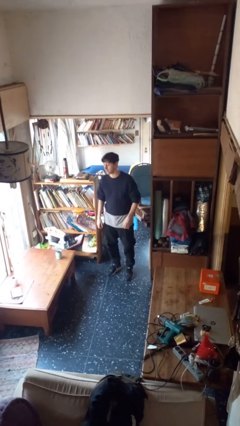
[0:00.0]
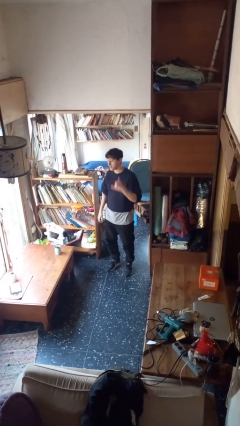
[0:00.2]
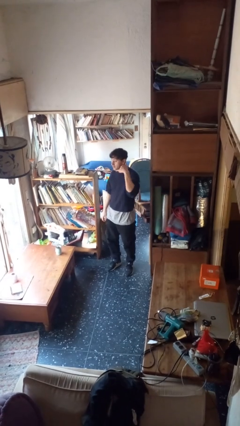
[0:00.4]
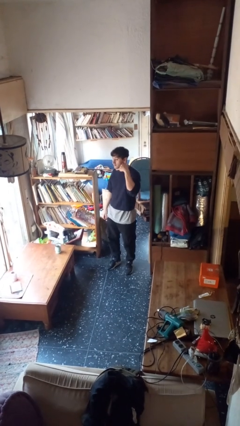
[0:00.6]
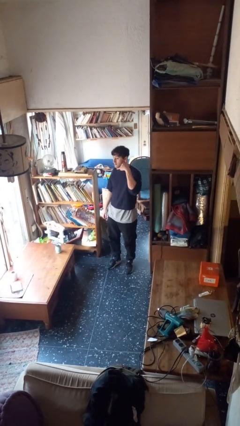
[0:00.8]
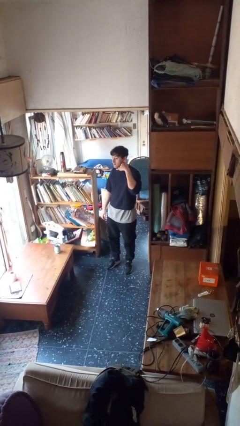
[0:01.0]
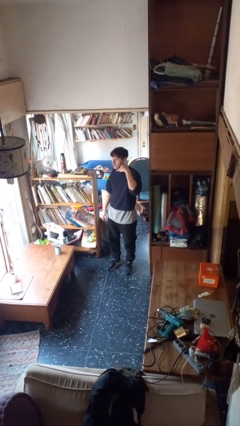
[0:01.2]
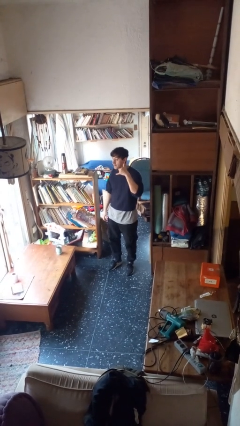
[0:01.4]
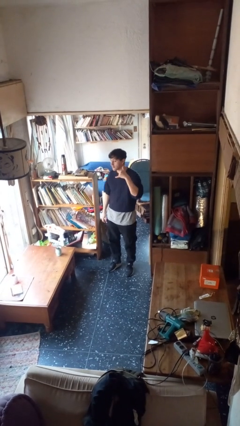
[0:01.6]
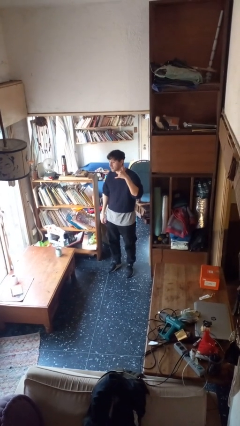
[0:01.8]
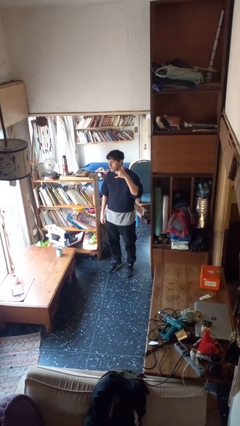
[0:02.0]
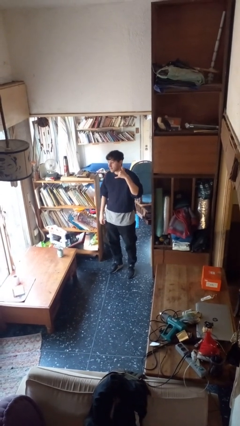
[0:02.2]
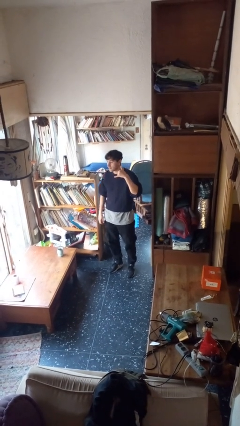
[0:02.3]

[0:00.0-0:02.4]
person gestures call me

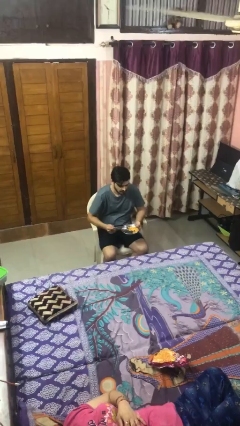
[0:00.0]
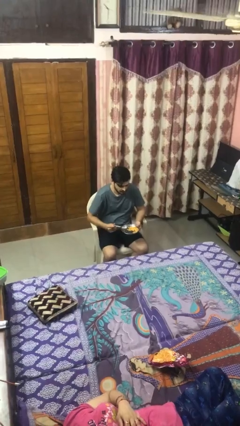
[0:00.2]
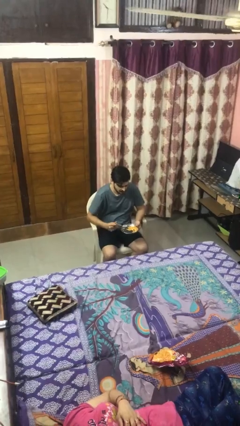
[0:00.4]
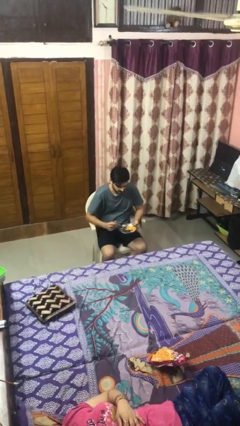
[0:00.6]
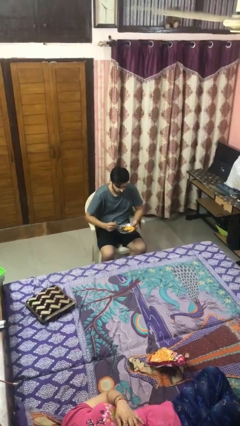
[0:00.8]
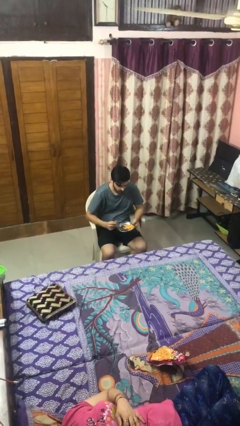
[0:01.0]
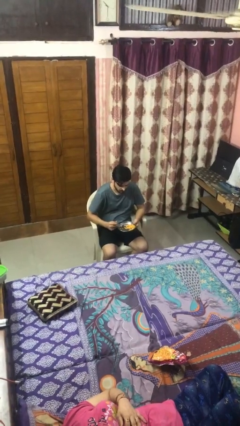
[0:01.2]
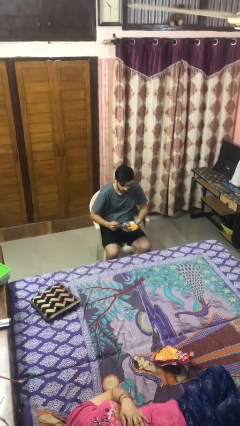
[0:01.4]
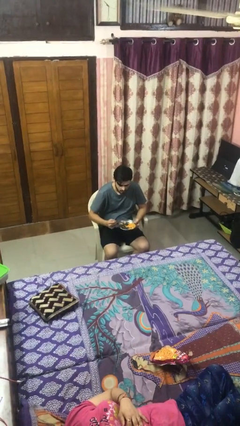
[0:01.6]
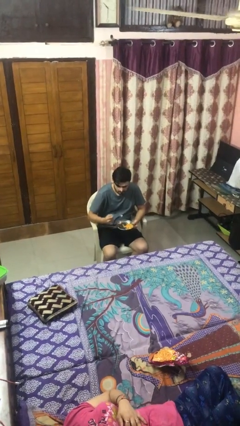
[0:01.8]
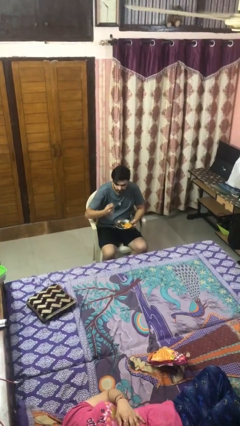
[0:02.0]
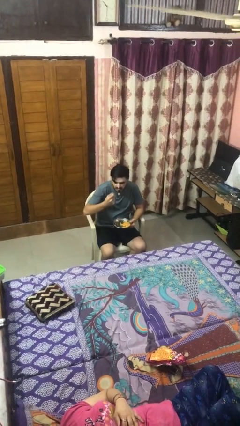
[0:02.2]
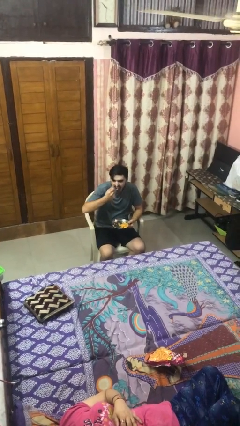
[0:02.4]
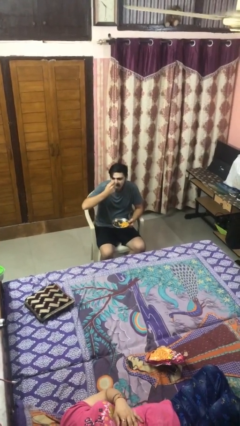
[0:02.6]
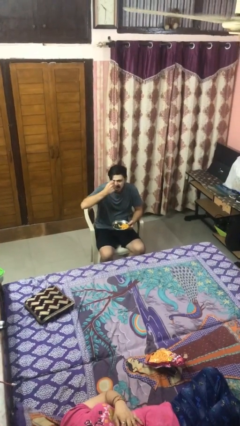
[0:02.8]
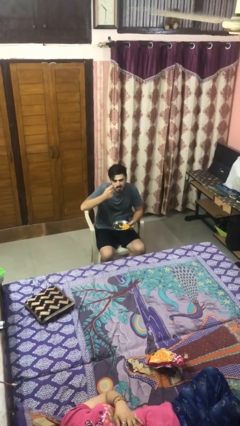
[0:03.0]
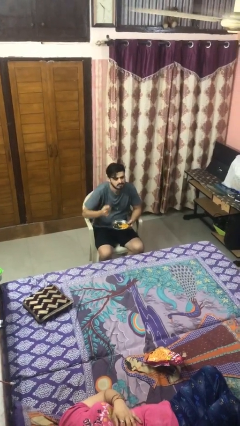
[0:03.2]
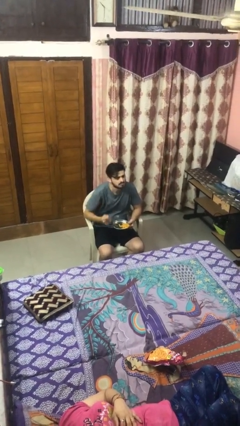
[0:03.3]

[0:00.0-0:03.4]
person eats with utensil

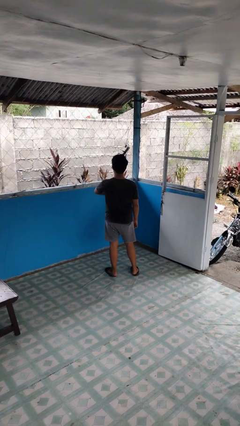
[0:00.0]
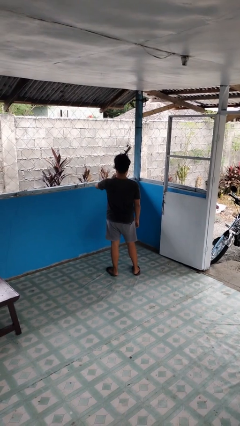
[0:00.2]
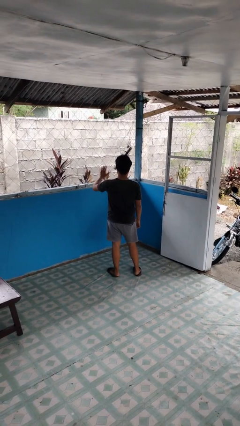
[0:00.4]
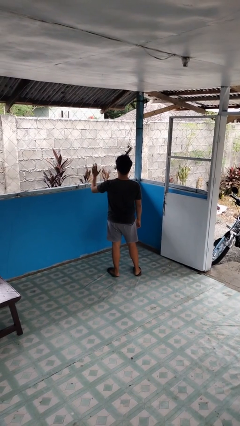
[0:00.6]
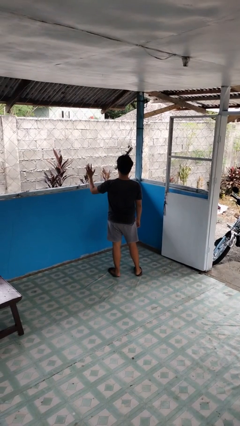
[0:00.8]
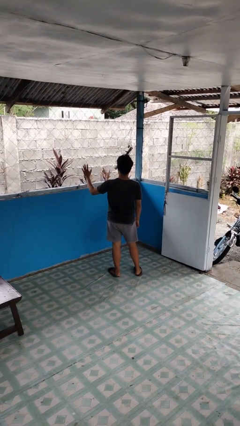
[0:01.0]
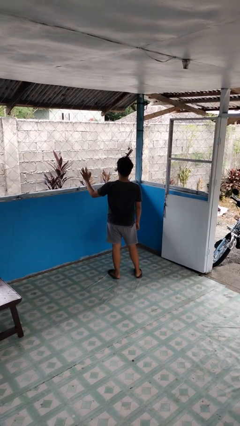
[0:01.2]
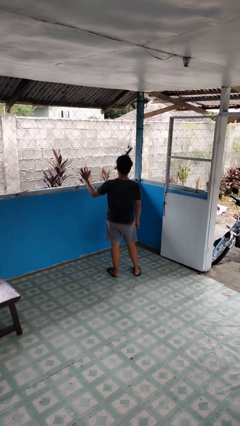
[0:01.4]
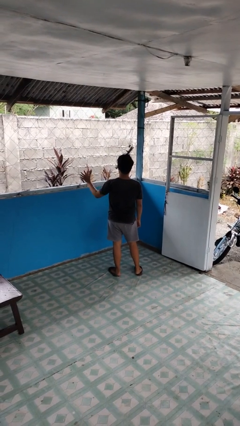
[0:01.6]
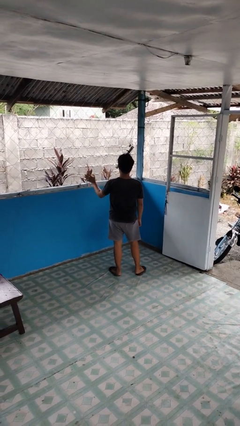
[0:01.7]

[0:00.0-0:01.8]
person gestures swipe left

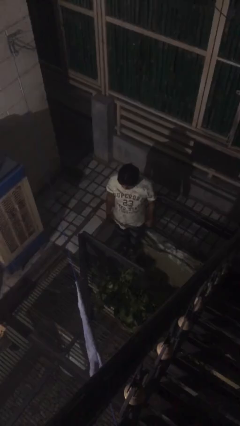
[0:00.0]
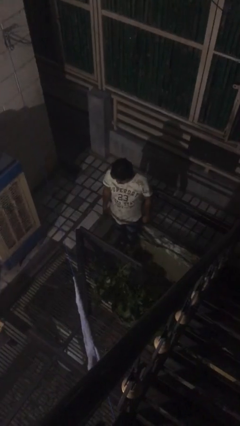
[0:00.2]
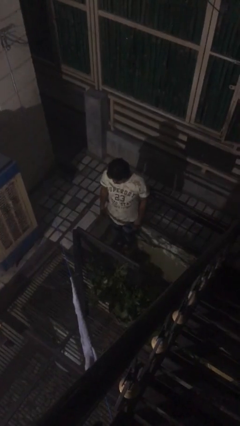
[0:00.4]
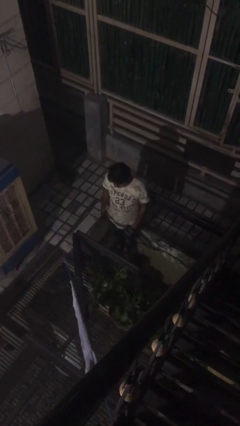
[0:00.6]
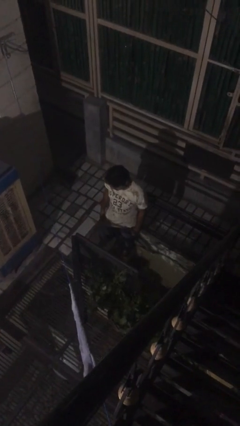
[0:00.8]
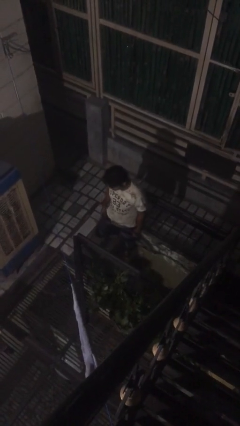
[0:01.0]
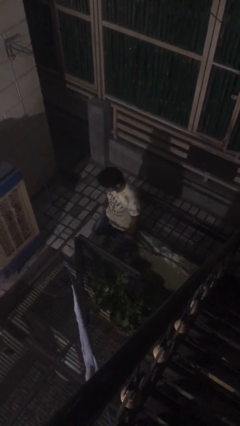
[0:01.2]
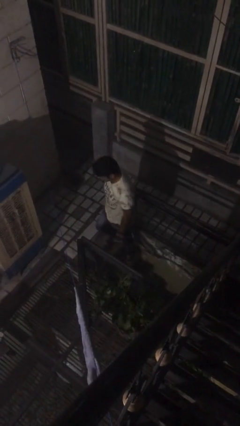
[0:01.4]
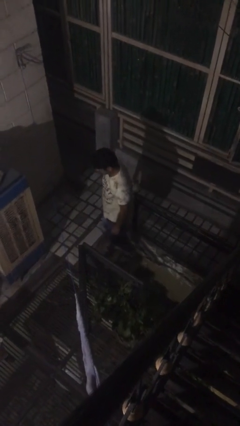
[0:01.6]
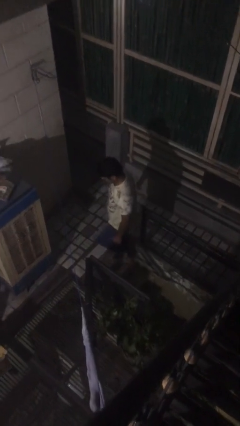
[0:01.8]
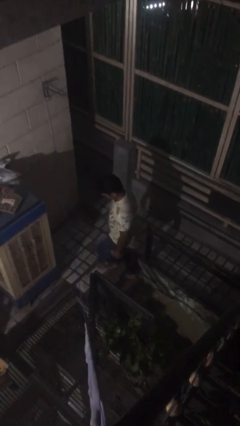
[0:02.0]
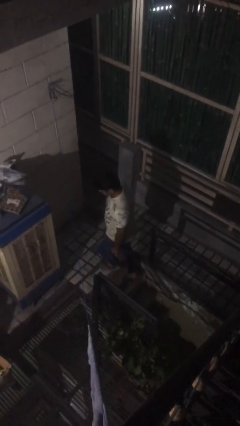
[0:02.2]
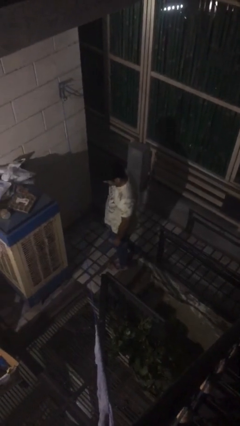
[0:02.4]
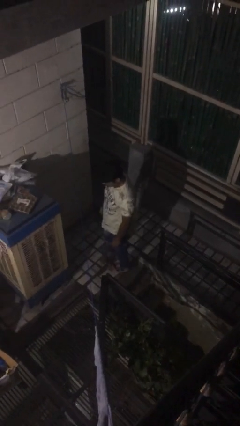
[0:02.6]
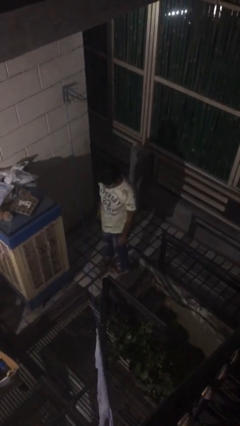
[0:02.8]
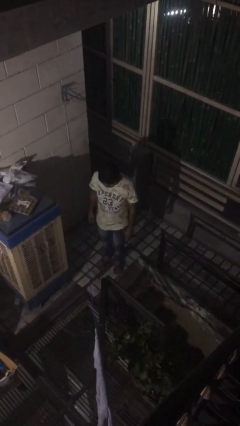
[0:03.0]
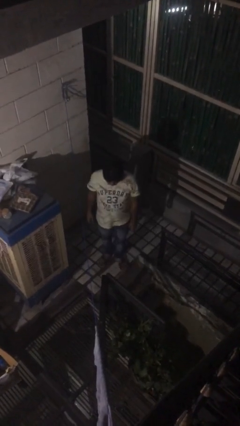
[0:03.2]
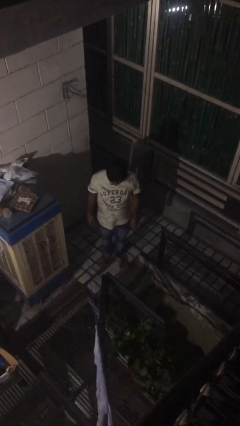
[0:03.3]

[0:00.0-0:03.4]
person climbs up stairs

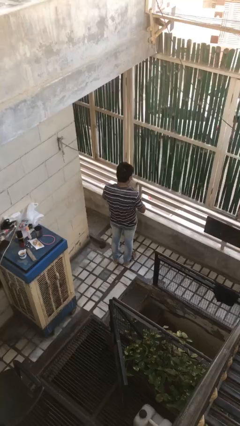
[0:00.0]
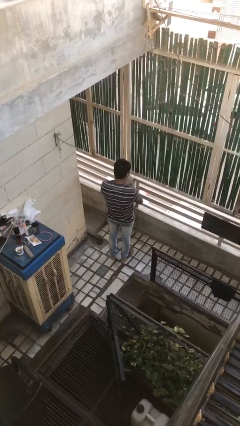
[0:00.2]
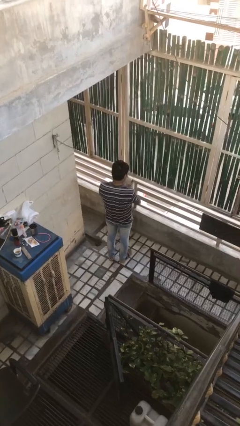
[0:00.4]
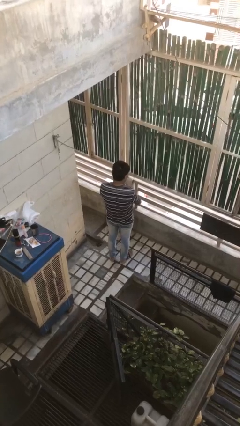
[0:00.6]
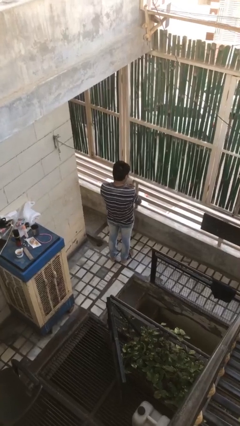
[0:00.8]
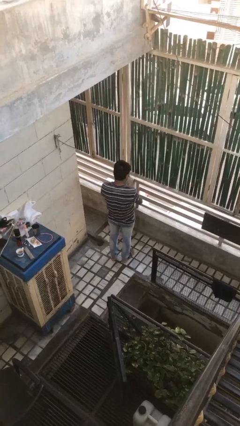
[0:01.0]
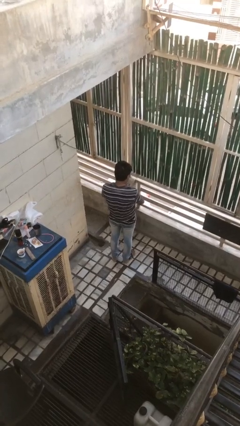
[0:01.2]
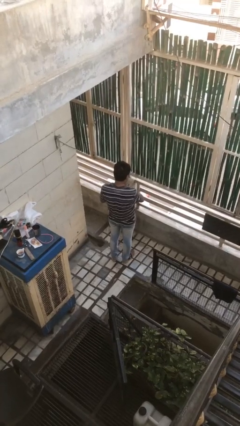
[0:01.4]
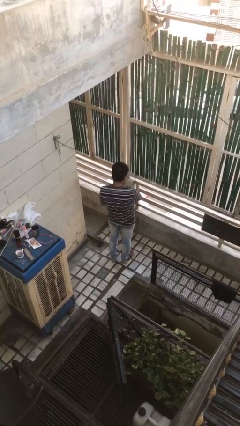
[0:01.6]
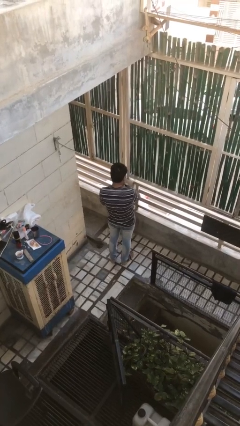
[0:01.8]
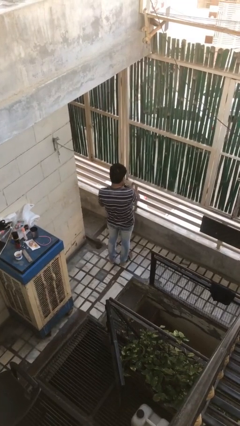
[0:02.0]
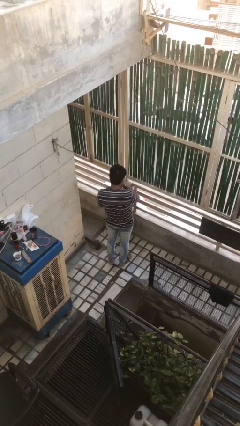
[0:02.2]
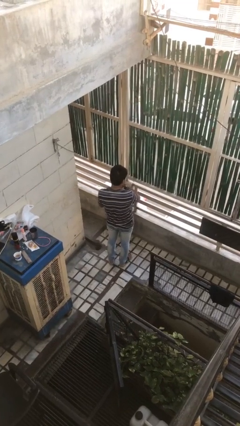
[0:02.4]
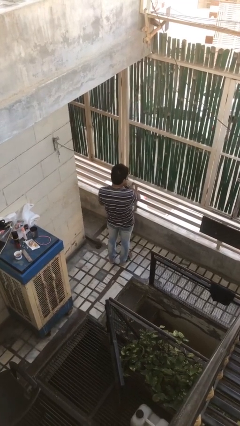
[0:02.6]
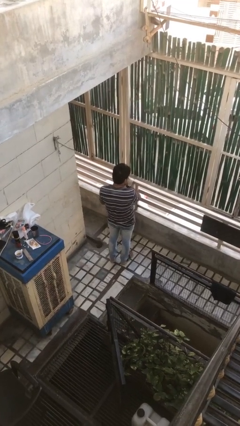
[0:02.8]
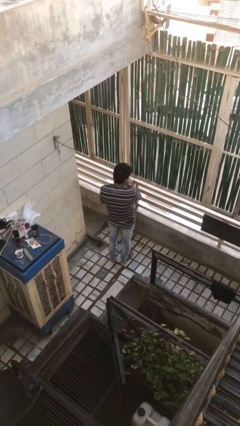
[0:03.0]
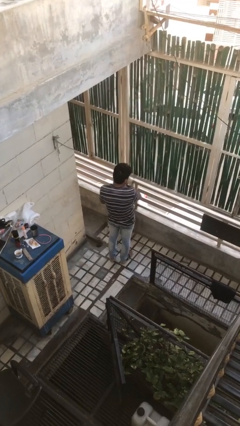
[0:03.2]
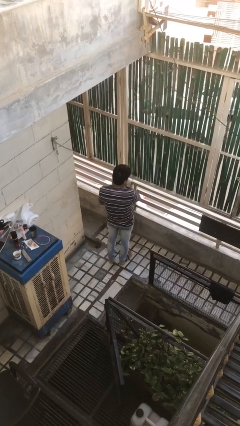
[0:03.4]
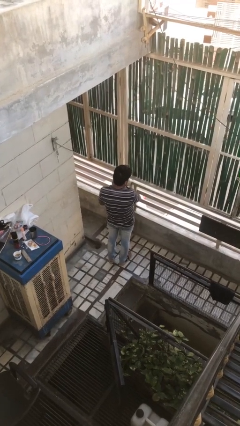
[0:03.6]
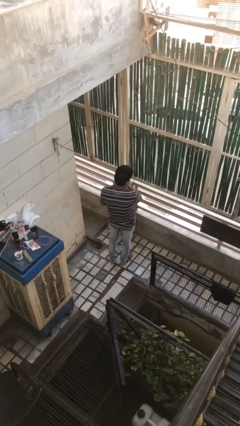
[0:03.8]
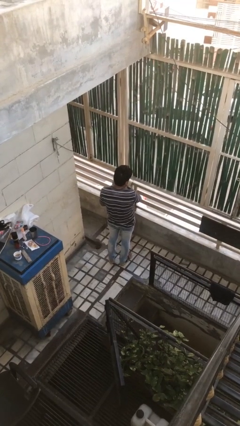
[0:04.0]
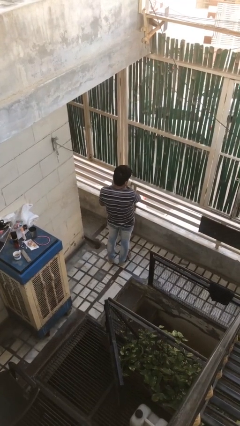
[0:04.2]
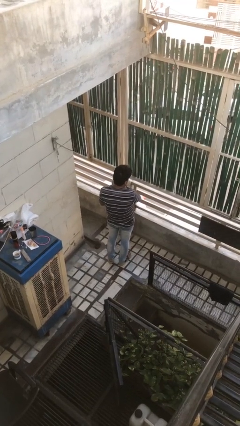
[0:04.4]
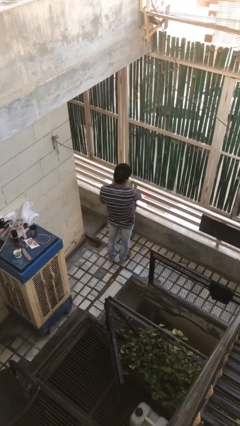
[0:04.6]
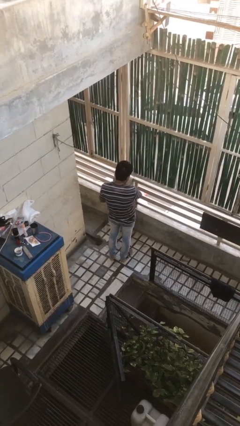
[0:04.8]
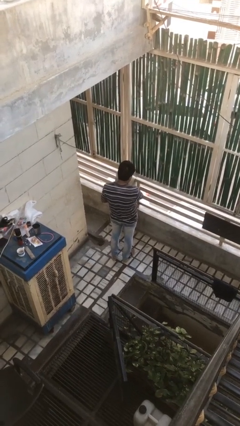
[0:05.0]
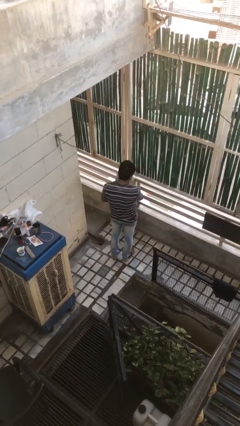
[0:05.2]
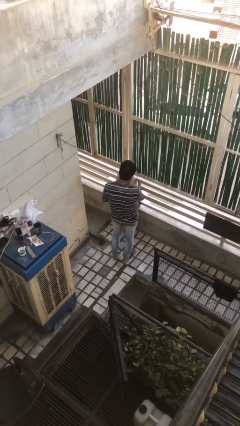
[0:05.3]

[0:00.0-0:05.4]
person puts on wristwatch

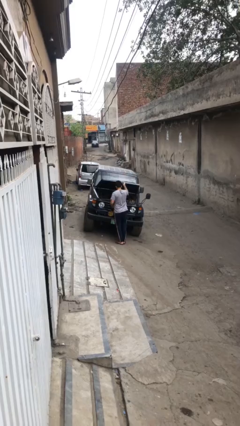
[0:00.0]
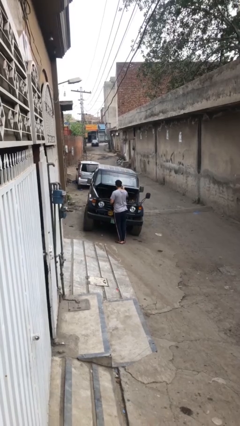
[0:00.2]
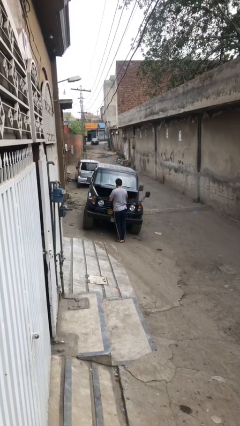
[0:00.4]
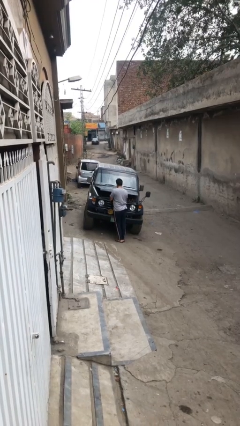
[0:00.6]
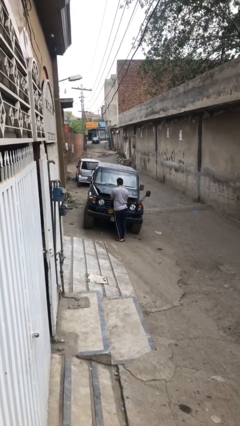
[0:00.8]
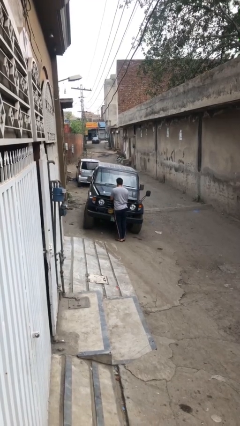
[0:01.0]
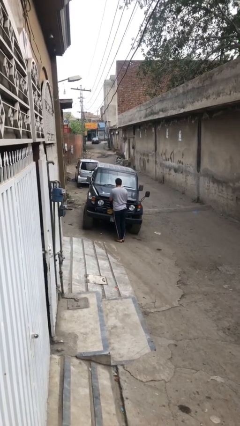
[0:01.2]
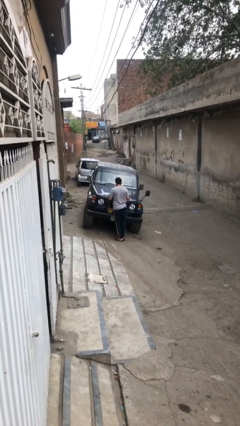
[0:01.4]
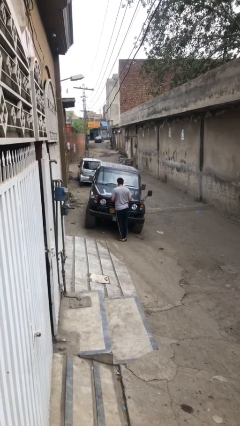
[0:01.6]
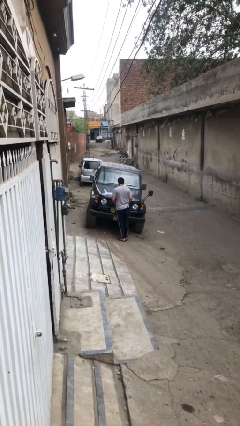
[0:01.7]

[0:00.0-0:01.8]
person closes car hood
